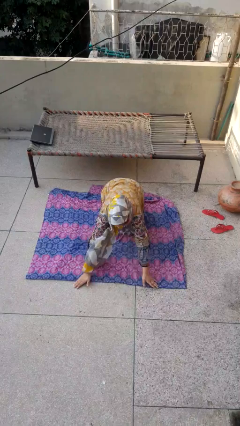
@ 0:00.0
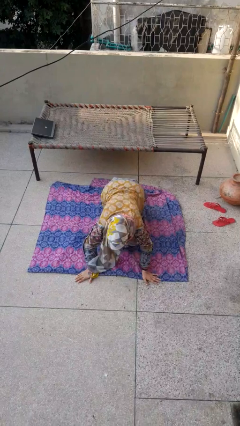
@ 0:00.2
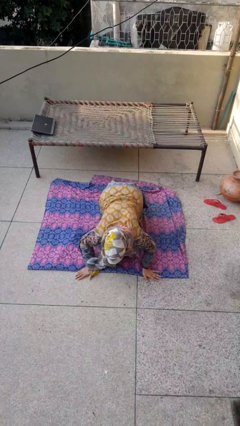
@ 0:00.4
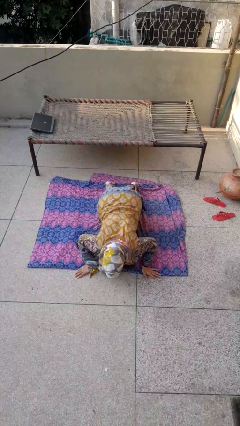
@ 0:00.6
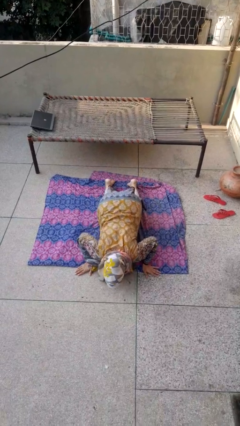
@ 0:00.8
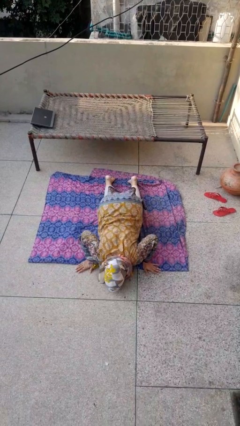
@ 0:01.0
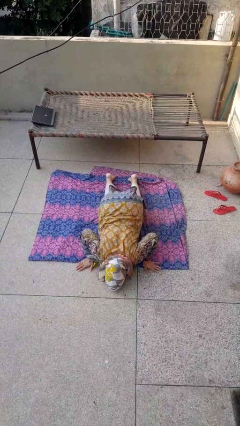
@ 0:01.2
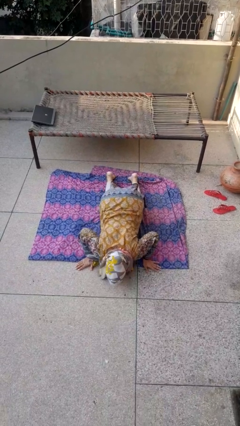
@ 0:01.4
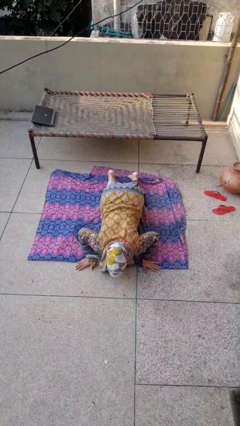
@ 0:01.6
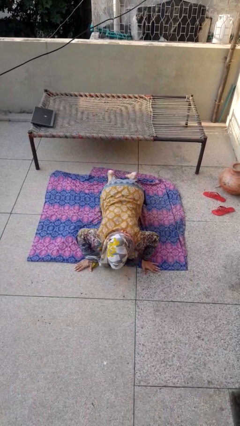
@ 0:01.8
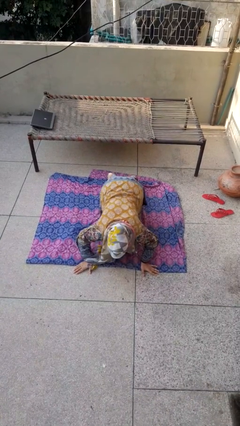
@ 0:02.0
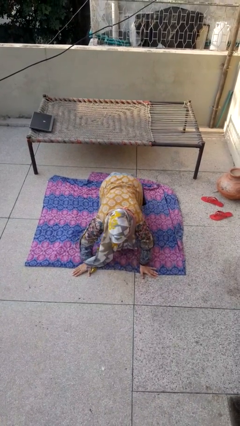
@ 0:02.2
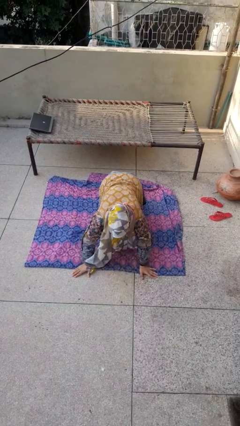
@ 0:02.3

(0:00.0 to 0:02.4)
person exercises with pushup

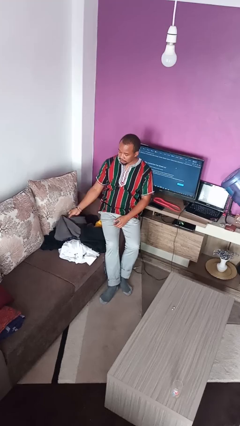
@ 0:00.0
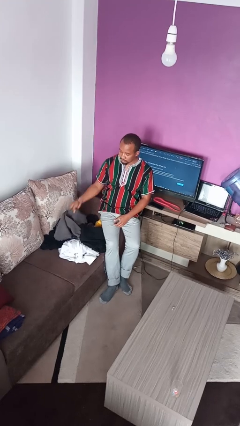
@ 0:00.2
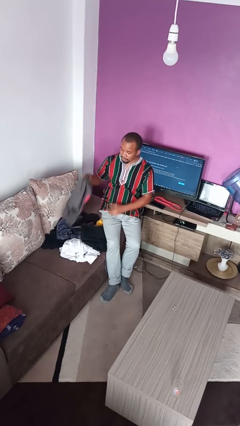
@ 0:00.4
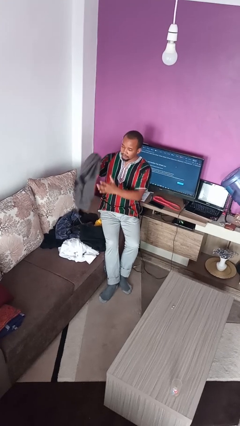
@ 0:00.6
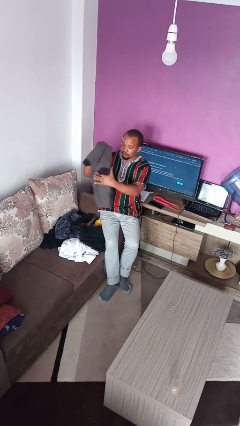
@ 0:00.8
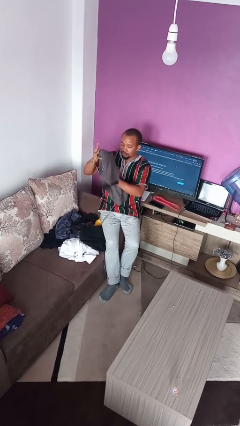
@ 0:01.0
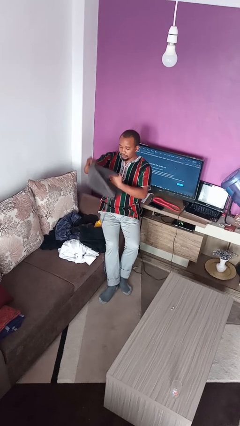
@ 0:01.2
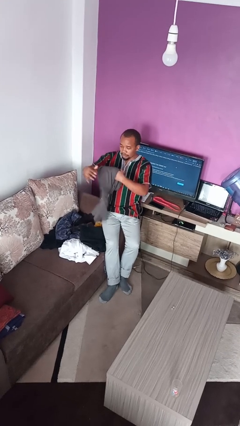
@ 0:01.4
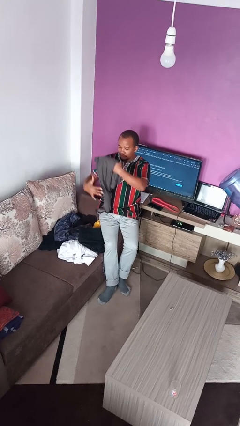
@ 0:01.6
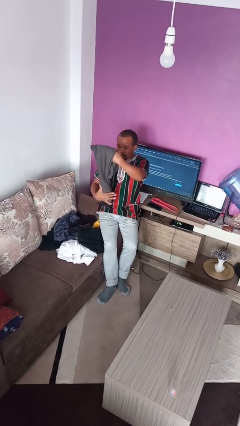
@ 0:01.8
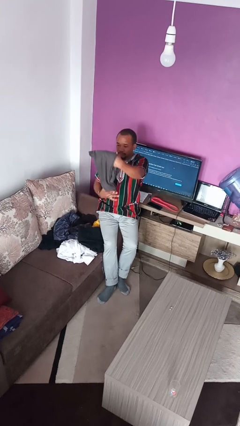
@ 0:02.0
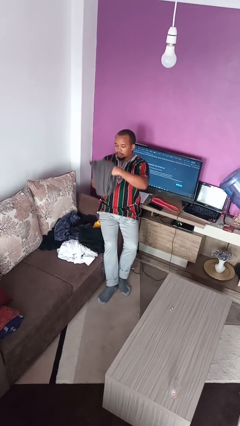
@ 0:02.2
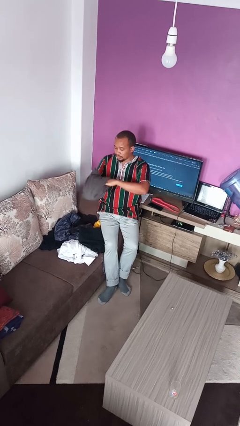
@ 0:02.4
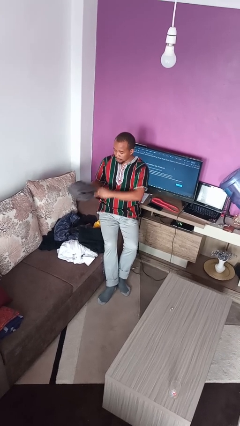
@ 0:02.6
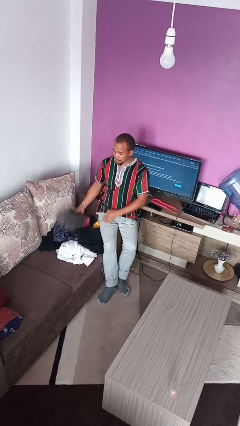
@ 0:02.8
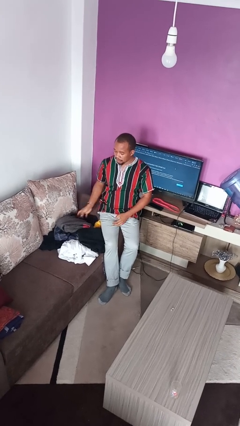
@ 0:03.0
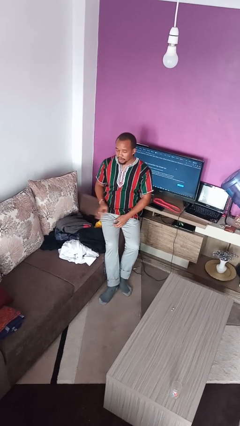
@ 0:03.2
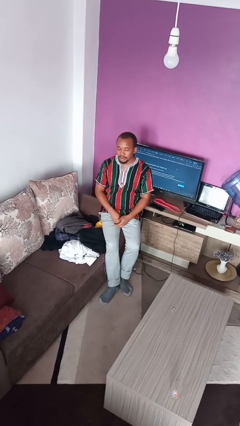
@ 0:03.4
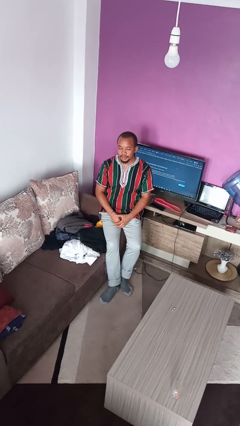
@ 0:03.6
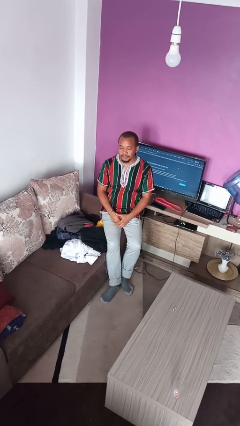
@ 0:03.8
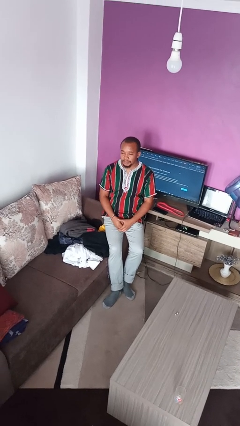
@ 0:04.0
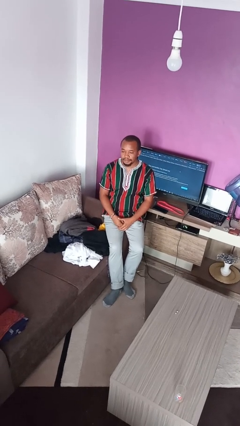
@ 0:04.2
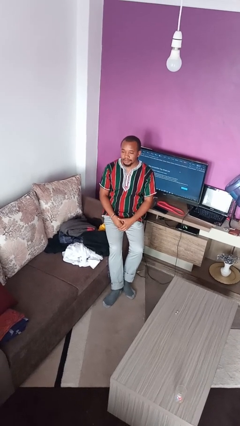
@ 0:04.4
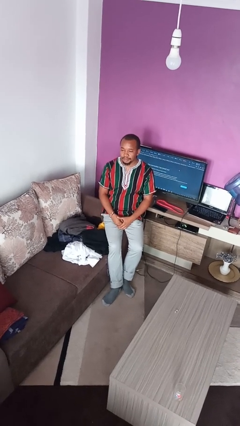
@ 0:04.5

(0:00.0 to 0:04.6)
person folds pants

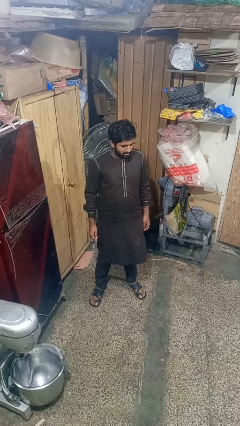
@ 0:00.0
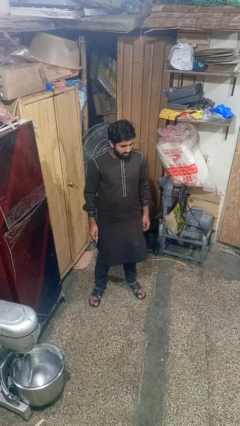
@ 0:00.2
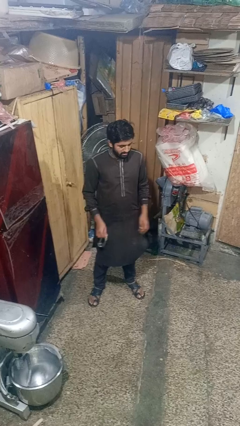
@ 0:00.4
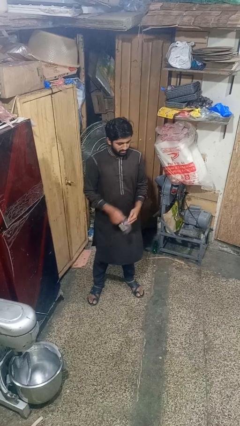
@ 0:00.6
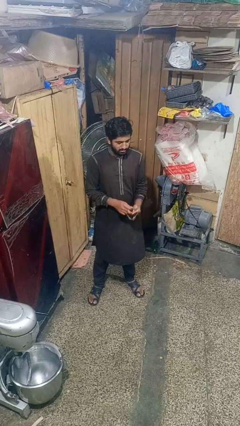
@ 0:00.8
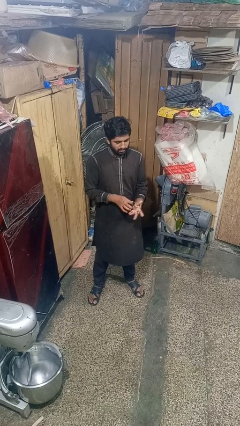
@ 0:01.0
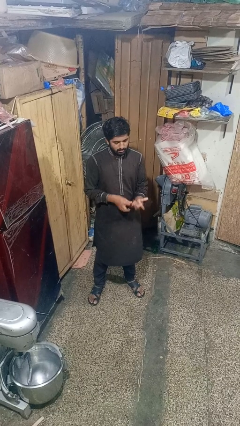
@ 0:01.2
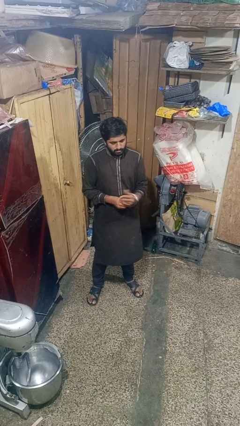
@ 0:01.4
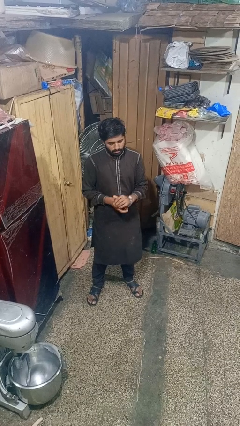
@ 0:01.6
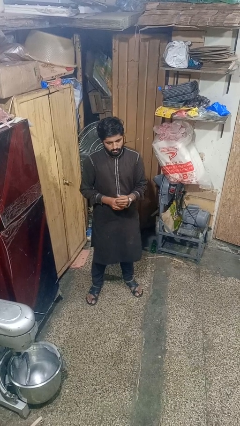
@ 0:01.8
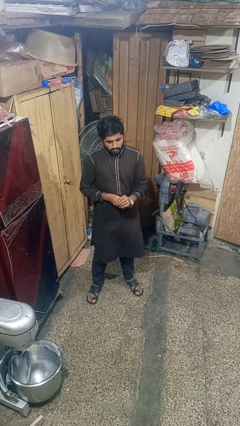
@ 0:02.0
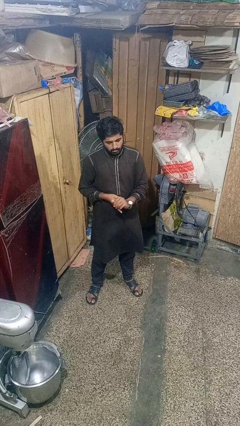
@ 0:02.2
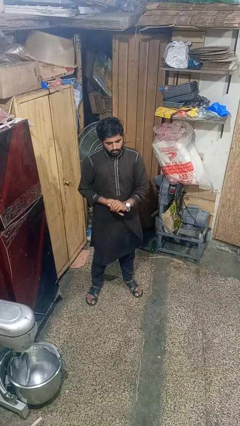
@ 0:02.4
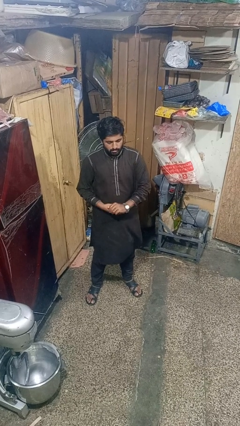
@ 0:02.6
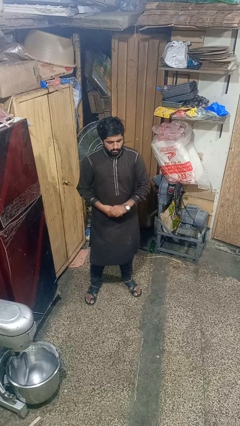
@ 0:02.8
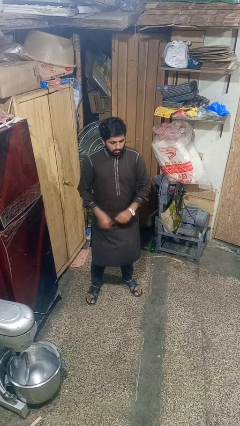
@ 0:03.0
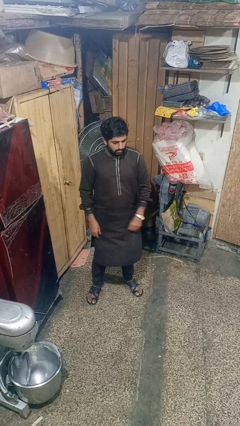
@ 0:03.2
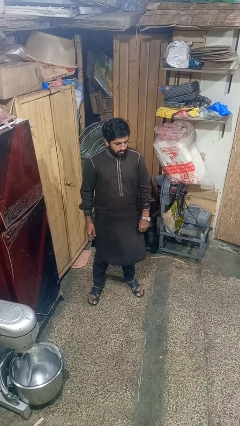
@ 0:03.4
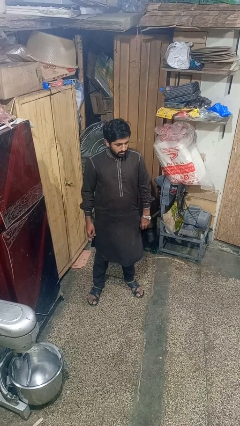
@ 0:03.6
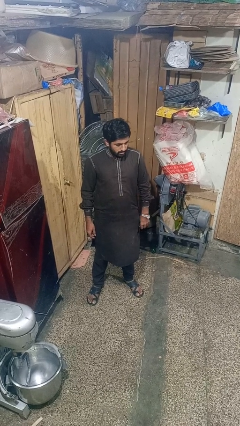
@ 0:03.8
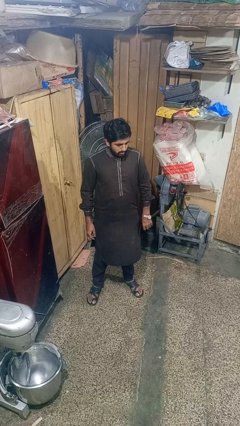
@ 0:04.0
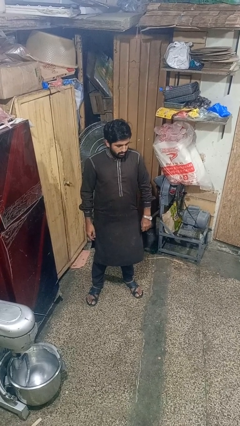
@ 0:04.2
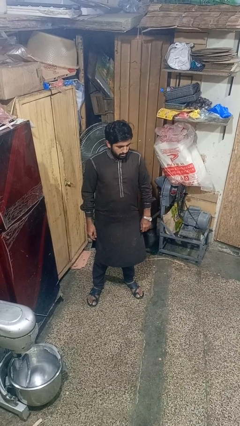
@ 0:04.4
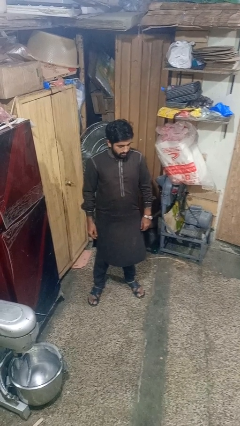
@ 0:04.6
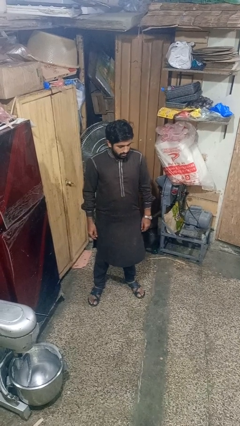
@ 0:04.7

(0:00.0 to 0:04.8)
person puts on wristwatch

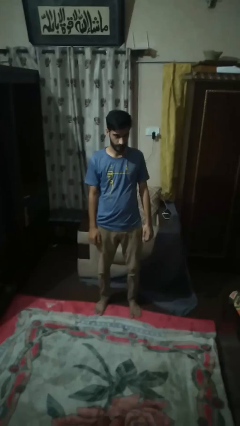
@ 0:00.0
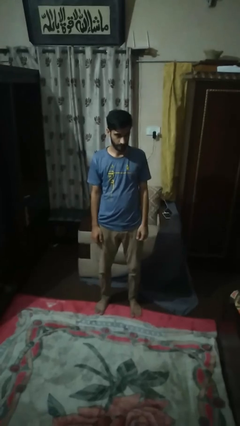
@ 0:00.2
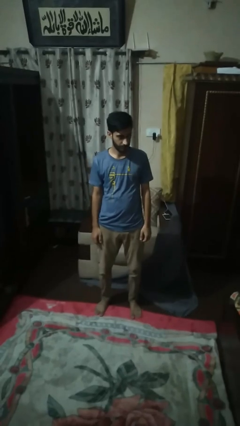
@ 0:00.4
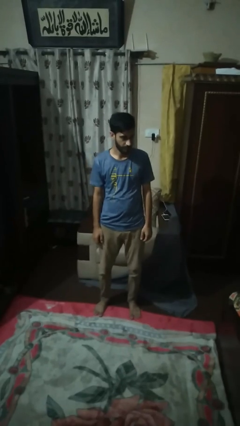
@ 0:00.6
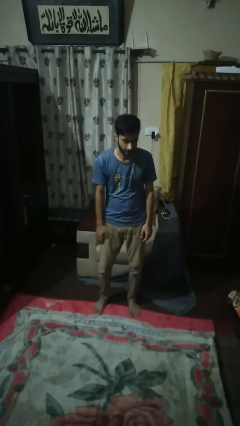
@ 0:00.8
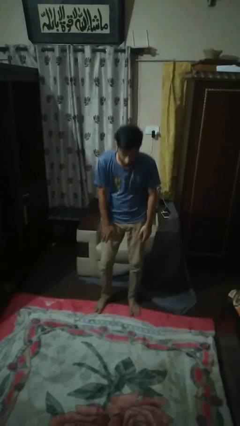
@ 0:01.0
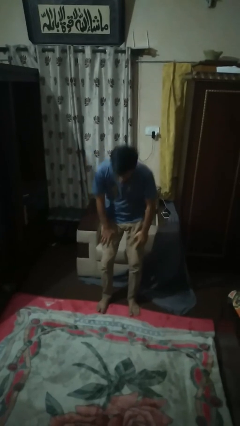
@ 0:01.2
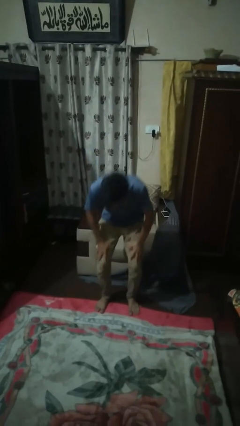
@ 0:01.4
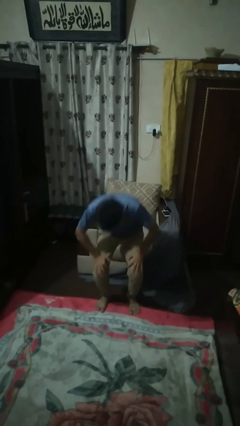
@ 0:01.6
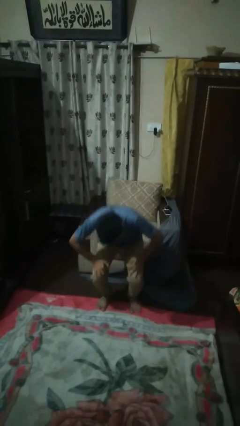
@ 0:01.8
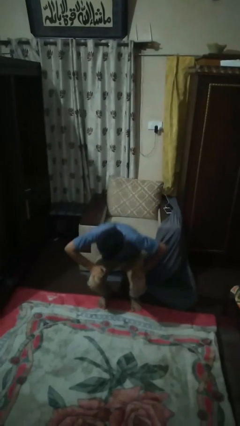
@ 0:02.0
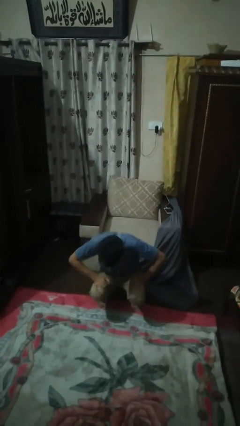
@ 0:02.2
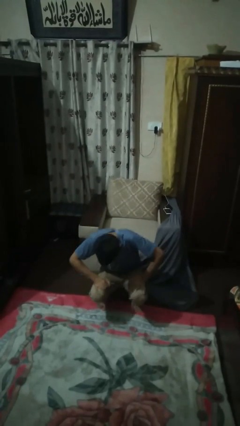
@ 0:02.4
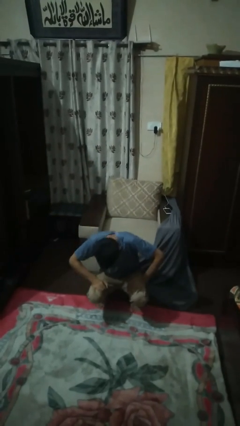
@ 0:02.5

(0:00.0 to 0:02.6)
person squats

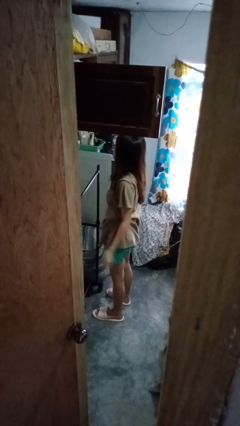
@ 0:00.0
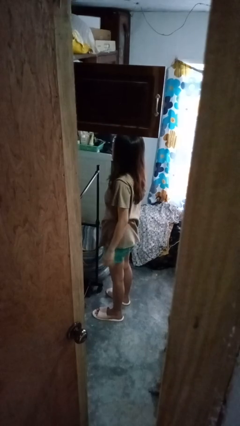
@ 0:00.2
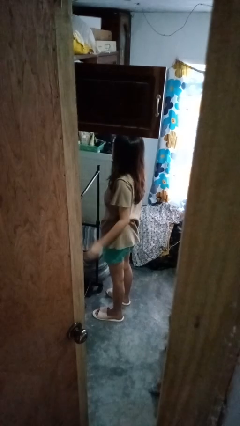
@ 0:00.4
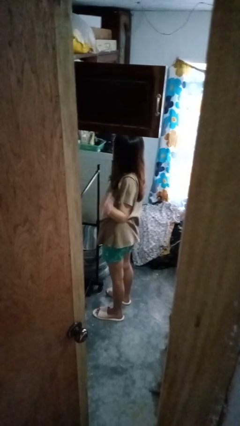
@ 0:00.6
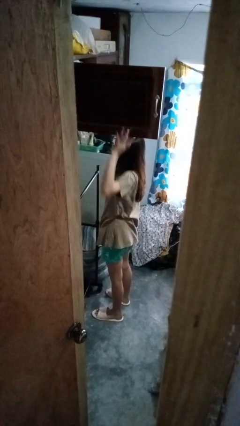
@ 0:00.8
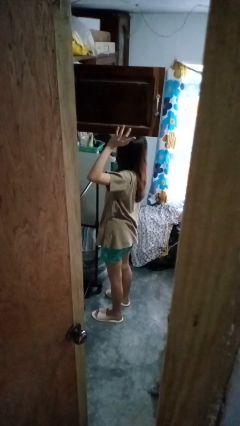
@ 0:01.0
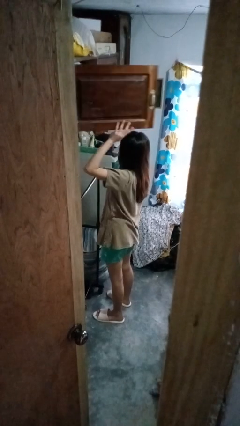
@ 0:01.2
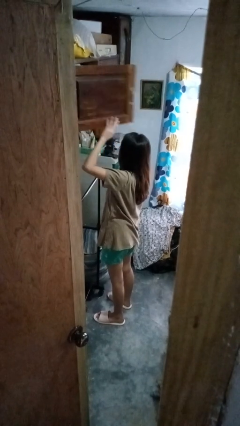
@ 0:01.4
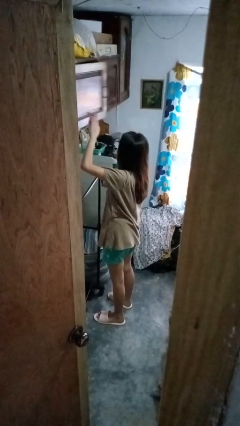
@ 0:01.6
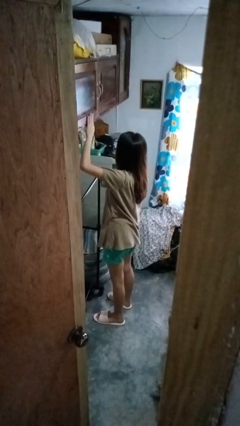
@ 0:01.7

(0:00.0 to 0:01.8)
person closes closet door

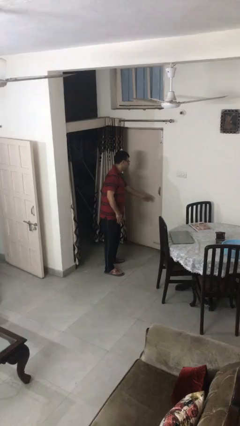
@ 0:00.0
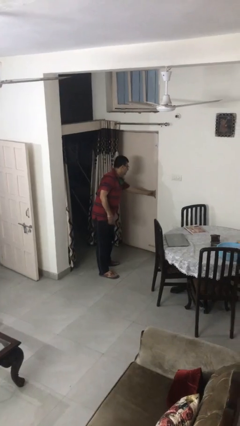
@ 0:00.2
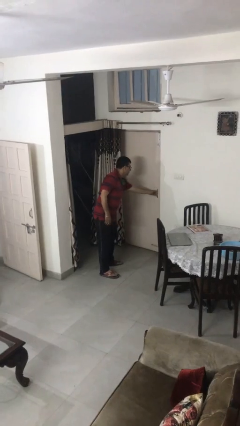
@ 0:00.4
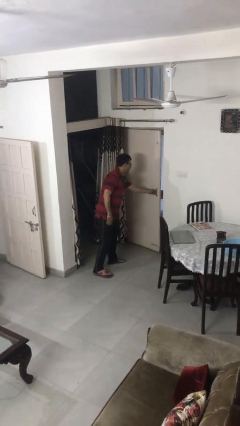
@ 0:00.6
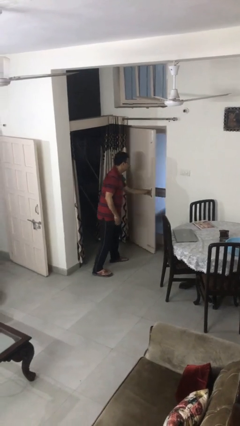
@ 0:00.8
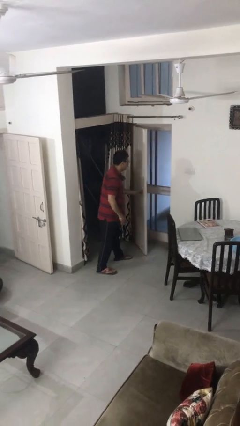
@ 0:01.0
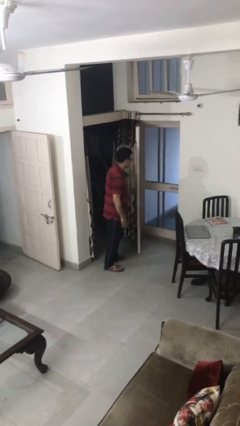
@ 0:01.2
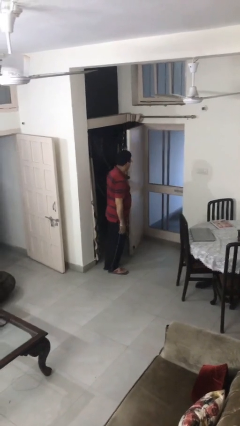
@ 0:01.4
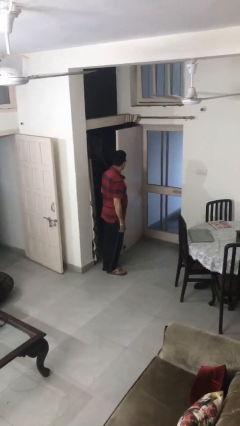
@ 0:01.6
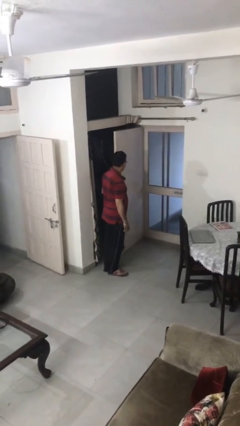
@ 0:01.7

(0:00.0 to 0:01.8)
person opens facility door
